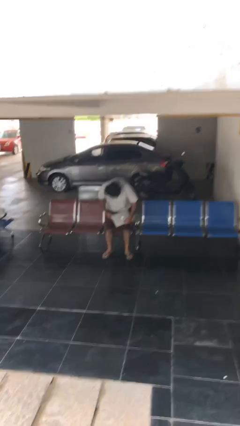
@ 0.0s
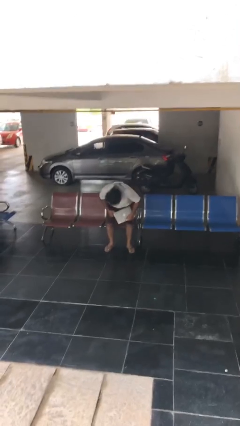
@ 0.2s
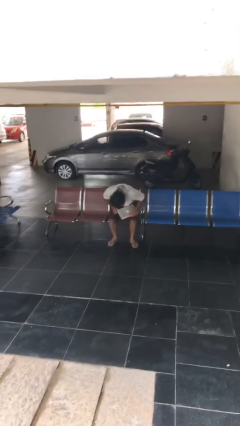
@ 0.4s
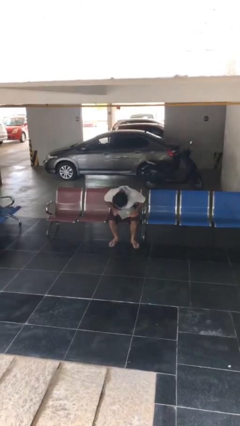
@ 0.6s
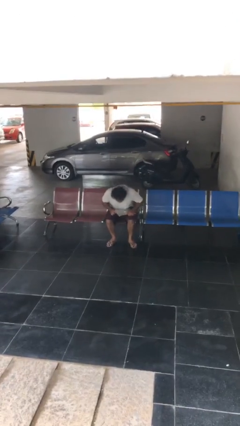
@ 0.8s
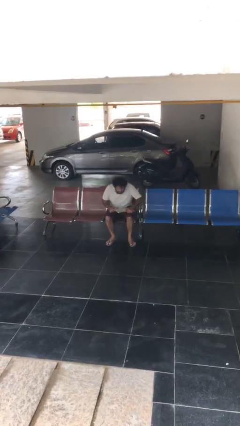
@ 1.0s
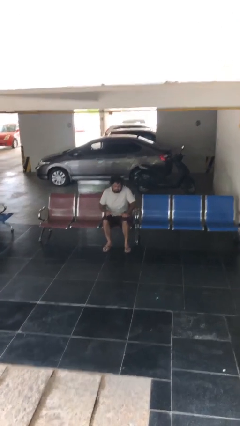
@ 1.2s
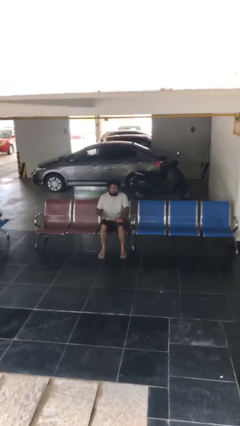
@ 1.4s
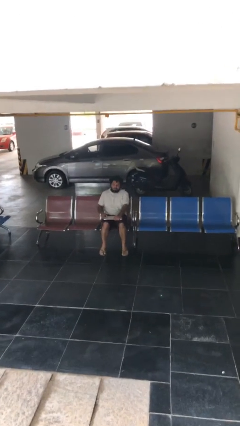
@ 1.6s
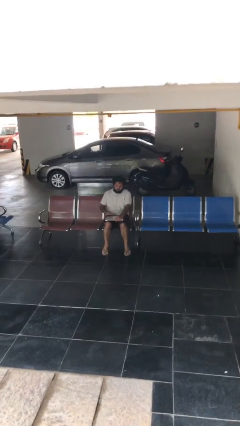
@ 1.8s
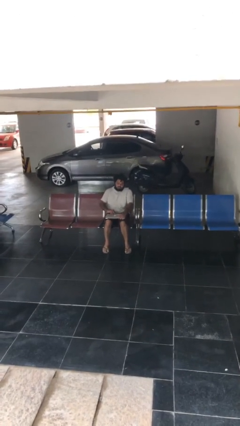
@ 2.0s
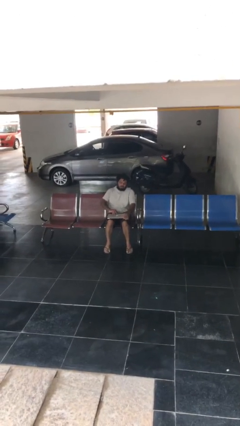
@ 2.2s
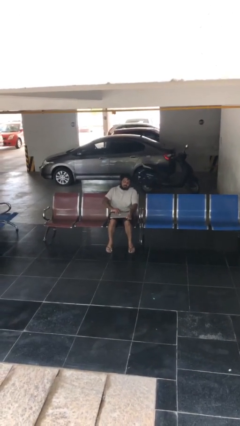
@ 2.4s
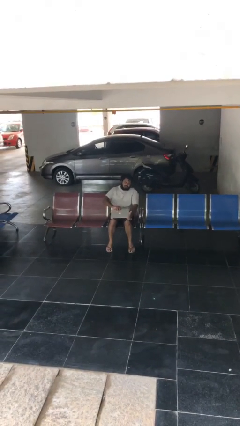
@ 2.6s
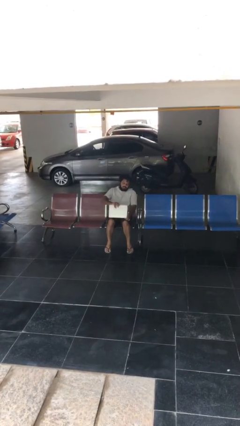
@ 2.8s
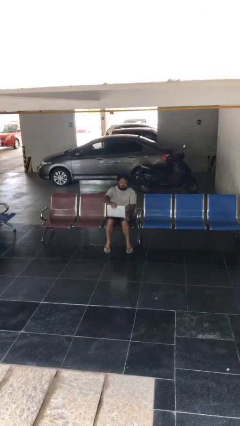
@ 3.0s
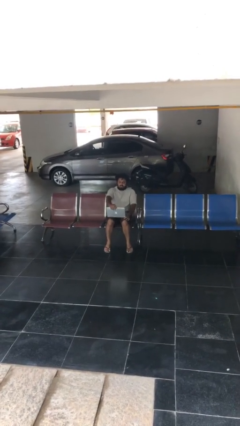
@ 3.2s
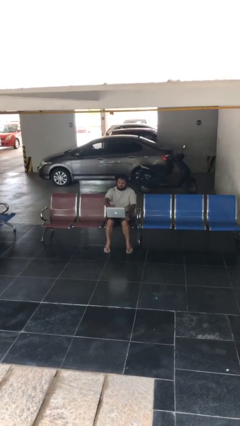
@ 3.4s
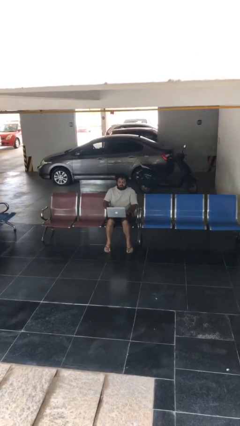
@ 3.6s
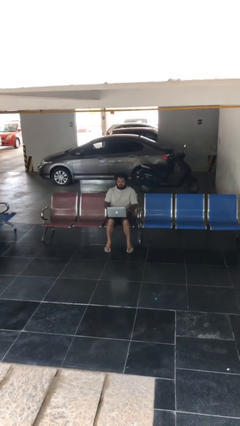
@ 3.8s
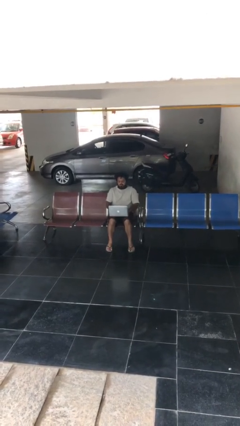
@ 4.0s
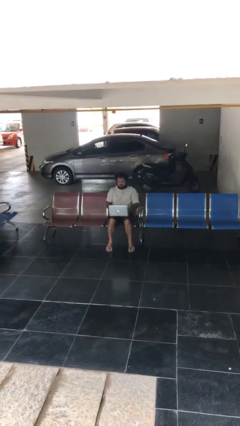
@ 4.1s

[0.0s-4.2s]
person sits down

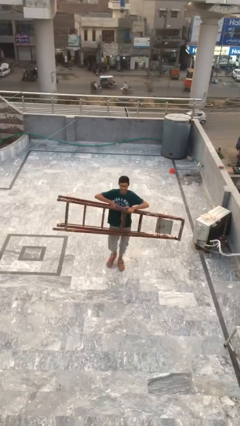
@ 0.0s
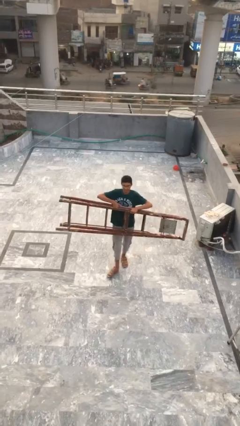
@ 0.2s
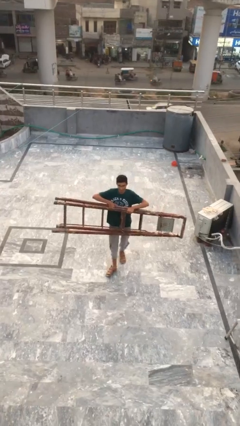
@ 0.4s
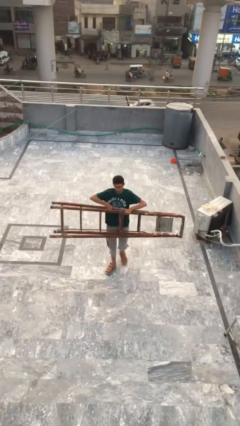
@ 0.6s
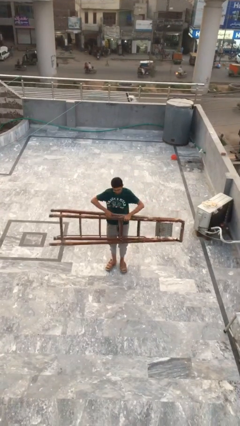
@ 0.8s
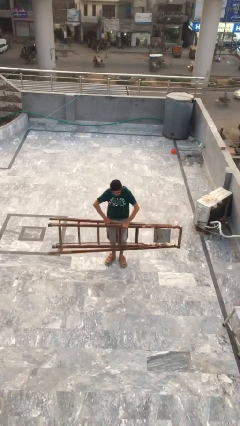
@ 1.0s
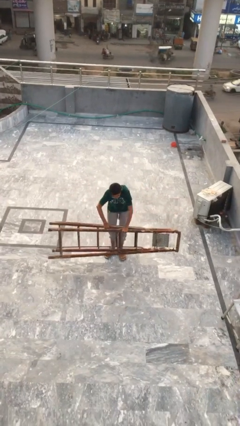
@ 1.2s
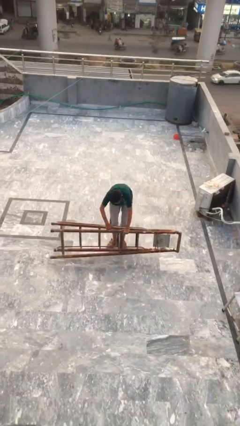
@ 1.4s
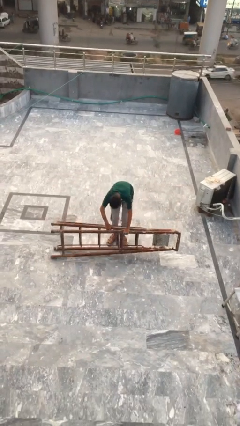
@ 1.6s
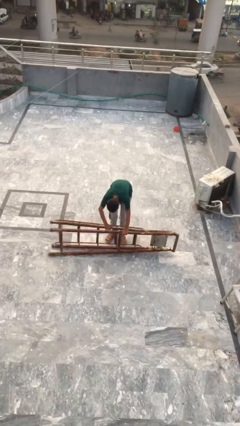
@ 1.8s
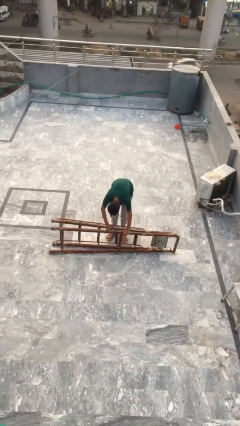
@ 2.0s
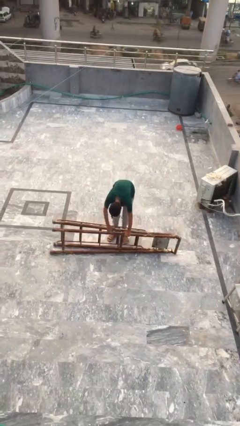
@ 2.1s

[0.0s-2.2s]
person puts down object on floor

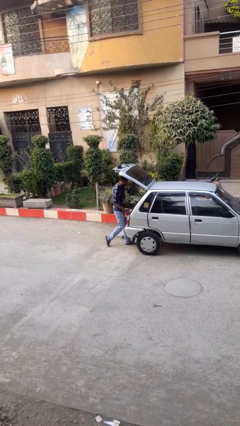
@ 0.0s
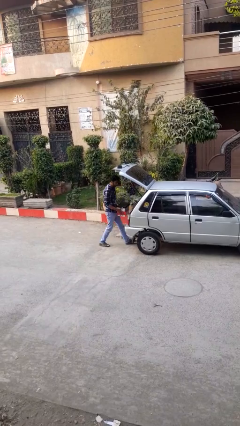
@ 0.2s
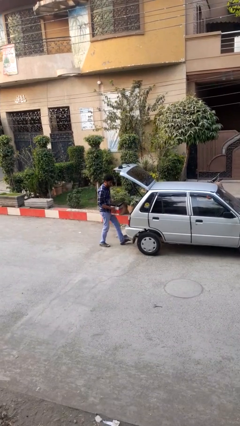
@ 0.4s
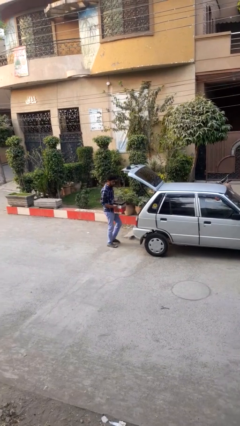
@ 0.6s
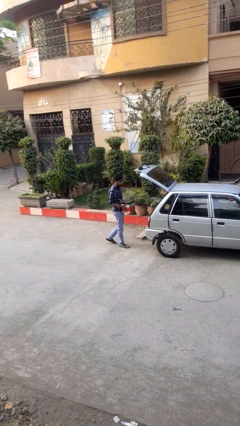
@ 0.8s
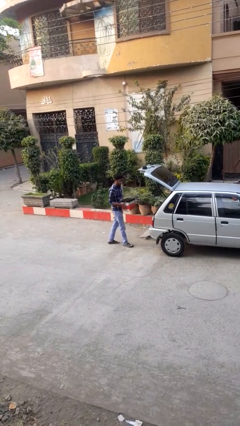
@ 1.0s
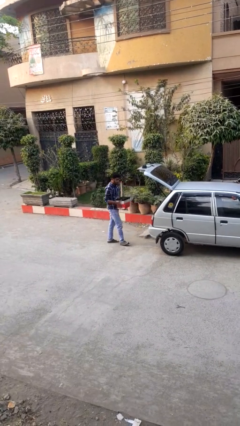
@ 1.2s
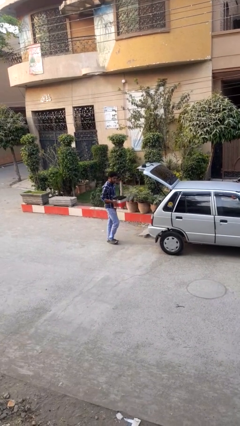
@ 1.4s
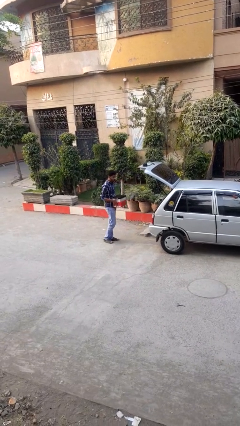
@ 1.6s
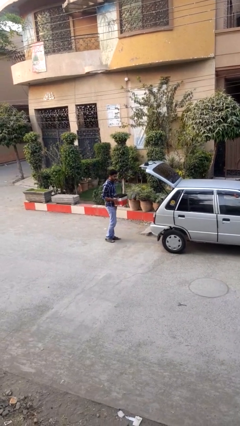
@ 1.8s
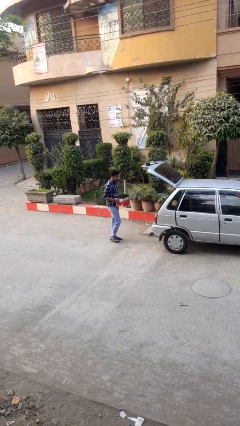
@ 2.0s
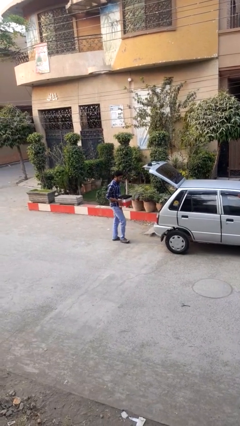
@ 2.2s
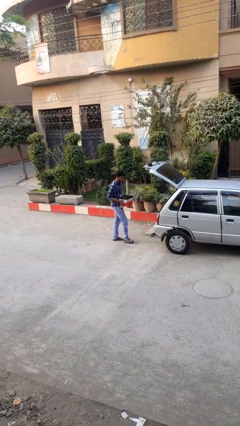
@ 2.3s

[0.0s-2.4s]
person unloads car

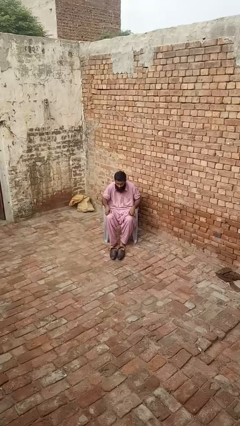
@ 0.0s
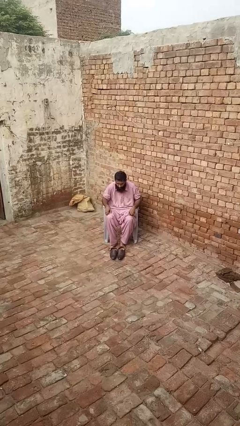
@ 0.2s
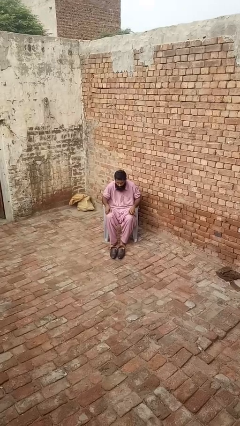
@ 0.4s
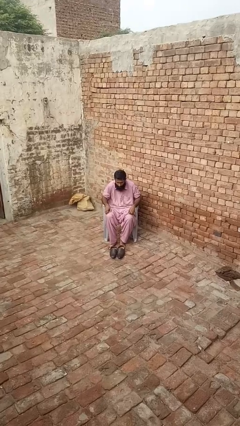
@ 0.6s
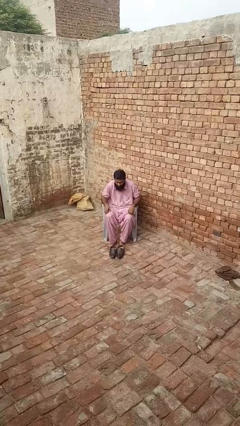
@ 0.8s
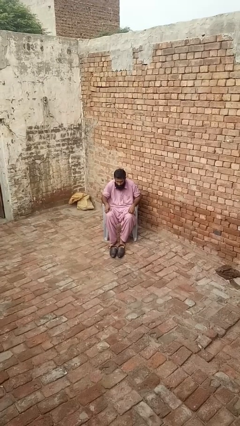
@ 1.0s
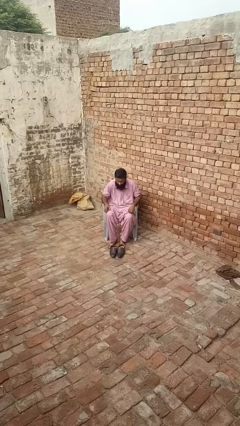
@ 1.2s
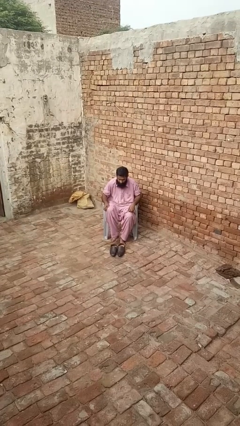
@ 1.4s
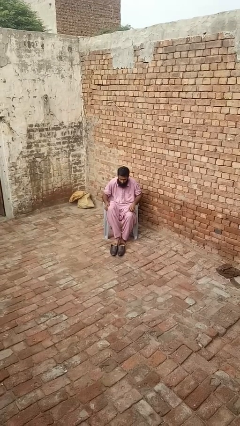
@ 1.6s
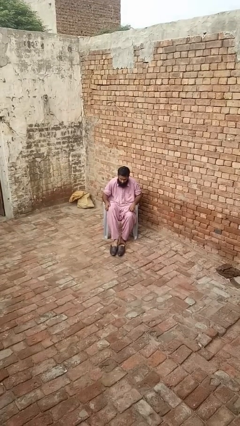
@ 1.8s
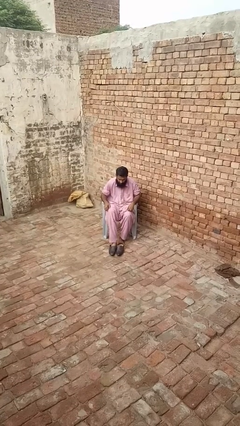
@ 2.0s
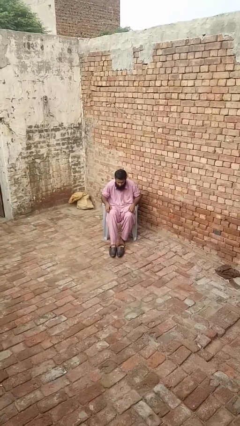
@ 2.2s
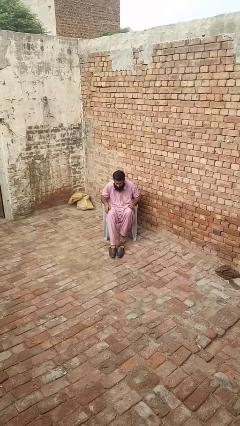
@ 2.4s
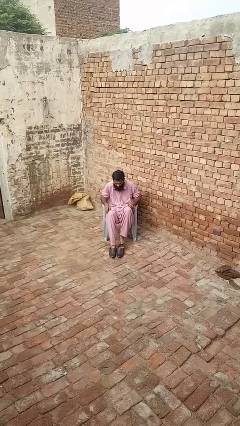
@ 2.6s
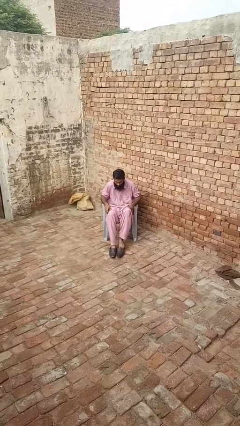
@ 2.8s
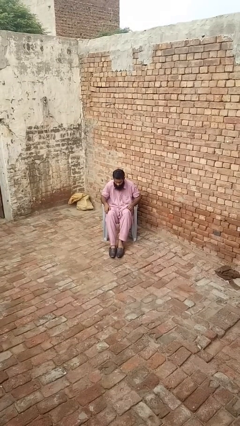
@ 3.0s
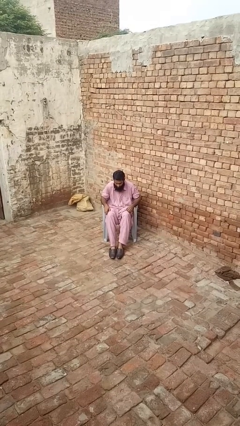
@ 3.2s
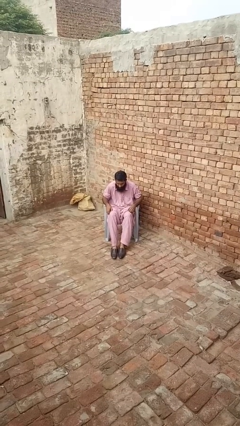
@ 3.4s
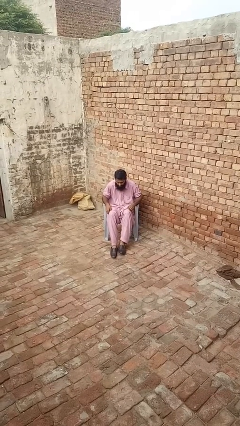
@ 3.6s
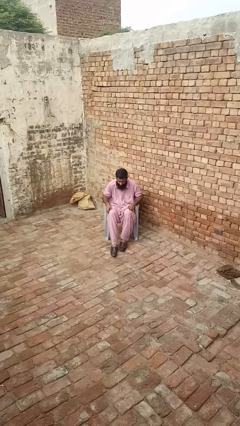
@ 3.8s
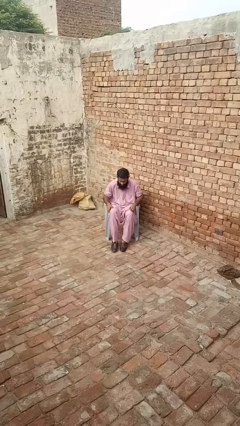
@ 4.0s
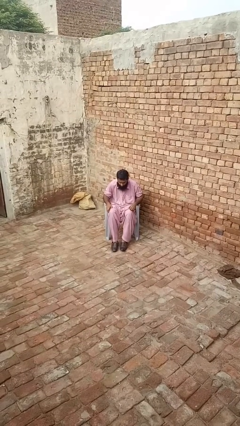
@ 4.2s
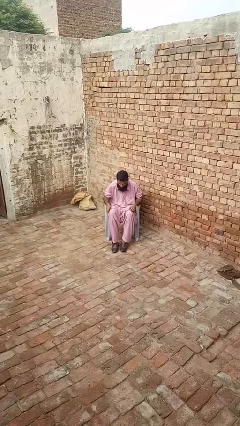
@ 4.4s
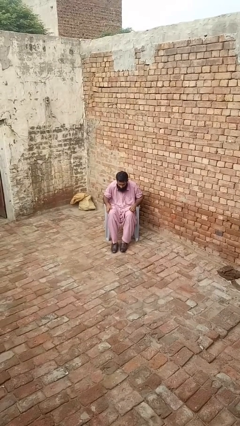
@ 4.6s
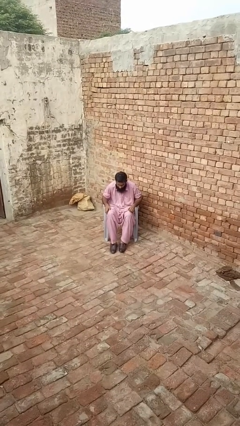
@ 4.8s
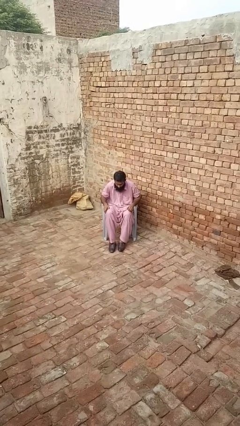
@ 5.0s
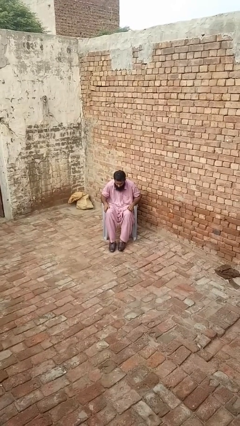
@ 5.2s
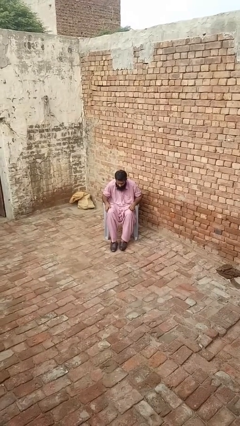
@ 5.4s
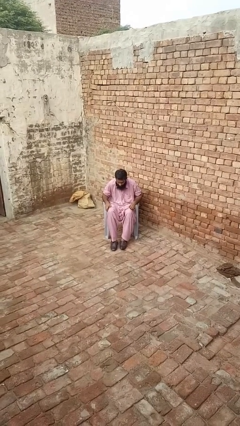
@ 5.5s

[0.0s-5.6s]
person puts on shoes

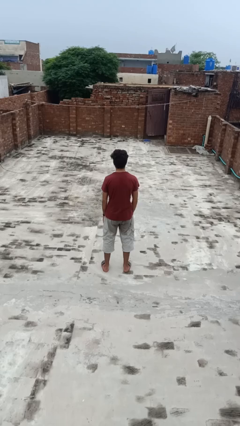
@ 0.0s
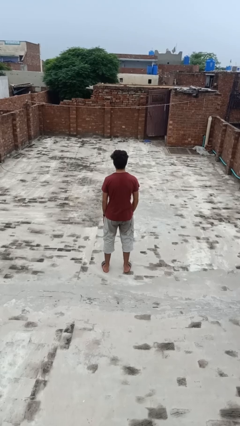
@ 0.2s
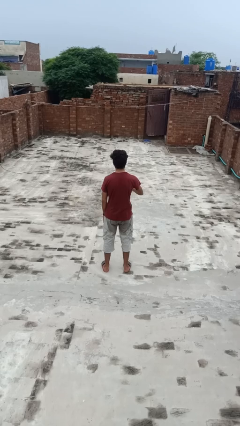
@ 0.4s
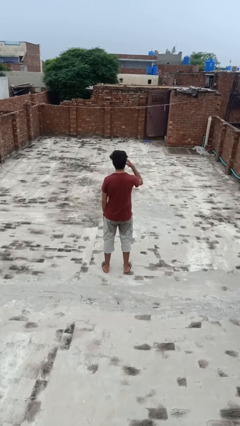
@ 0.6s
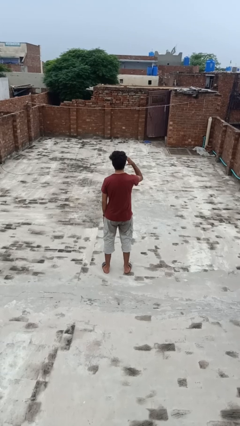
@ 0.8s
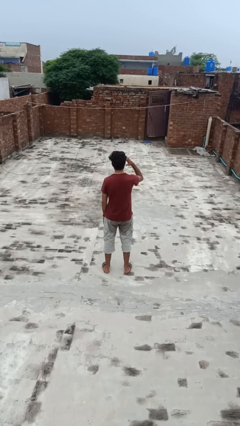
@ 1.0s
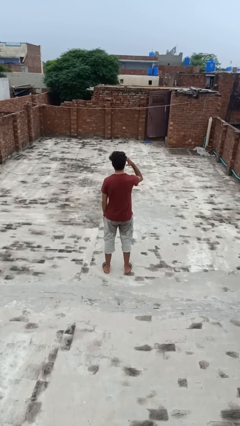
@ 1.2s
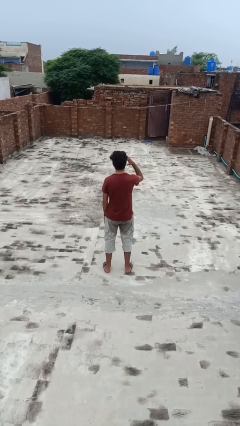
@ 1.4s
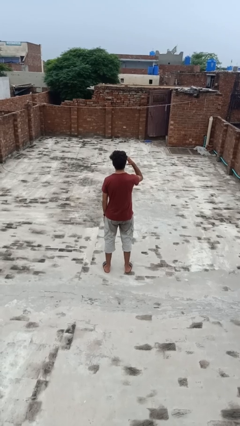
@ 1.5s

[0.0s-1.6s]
person salutes

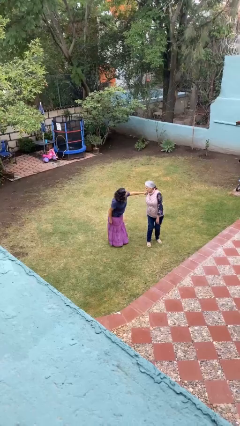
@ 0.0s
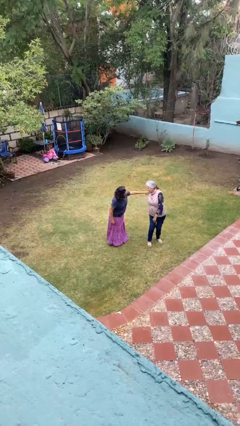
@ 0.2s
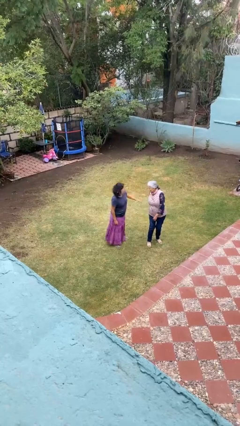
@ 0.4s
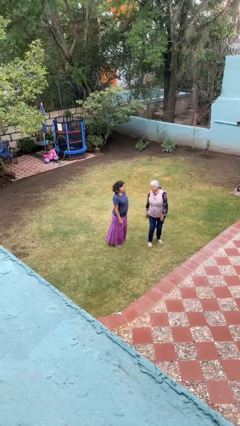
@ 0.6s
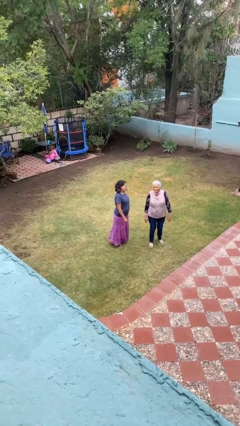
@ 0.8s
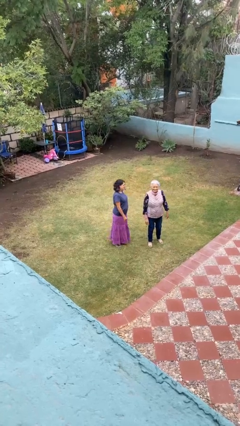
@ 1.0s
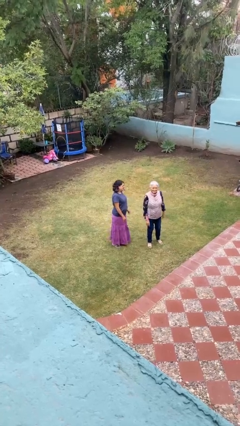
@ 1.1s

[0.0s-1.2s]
person spins person around

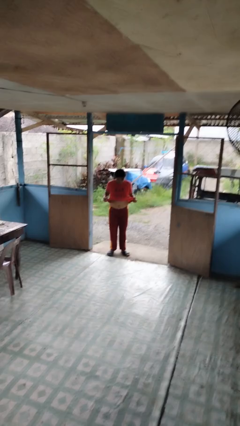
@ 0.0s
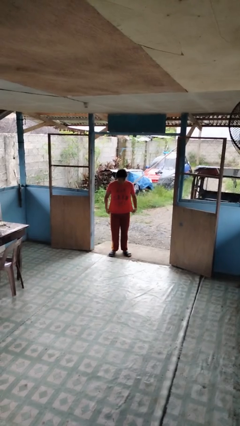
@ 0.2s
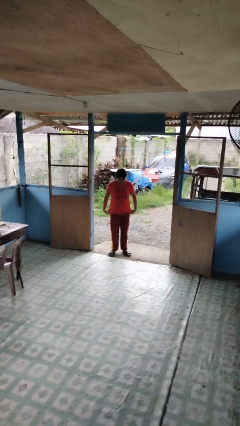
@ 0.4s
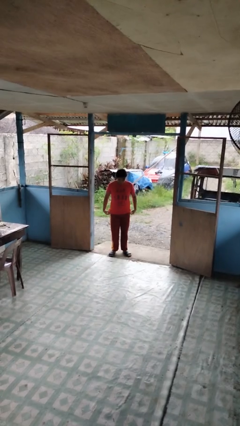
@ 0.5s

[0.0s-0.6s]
person untucks shirt
